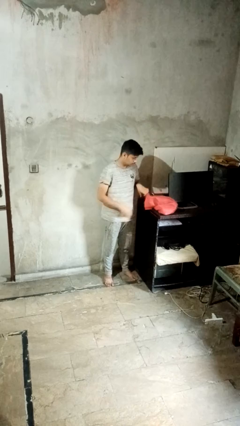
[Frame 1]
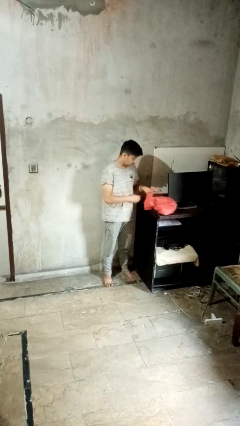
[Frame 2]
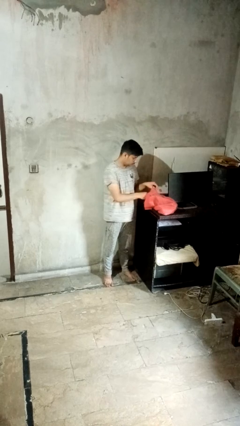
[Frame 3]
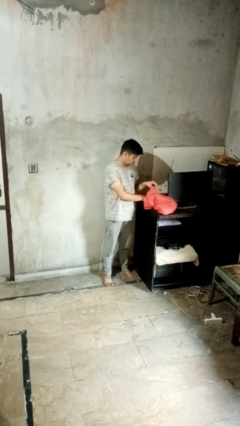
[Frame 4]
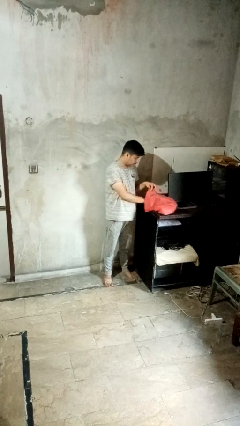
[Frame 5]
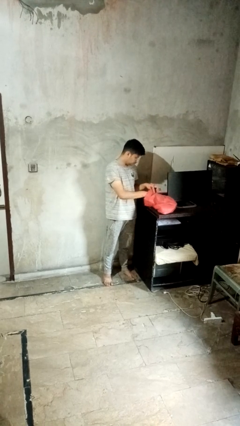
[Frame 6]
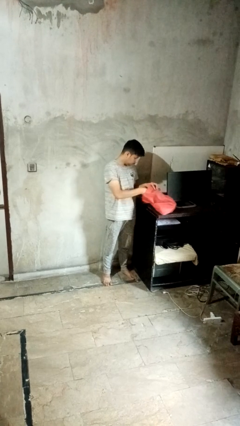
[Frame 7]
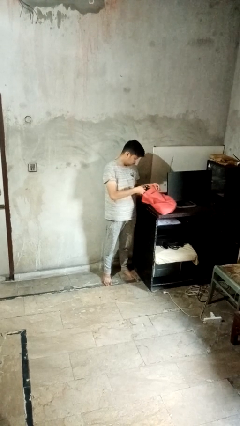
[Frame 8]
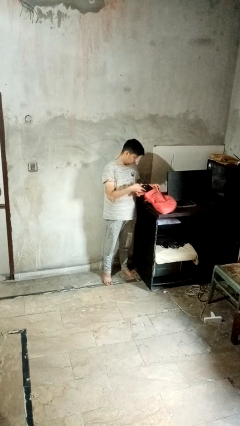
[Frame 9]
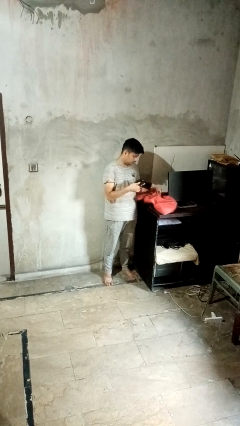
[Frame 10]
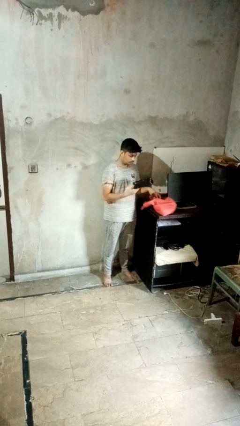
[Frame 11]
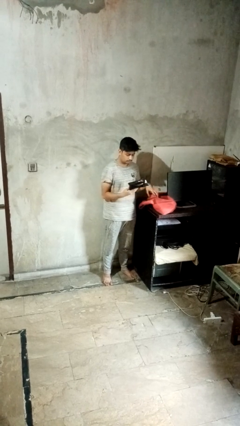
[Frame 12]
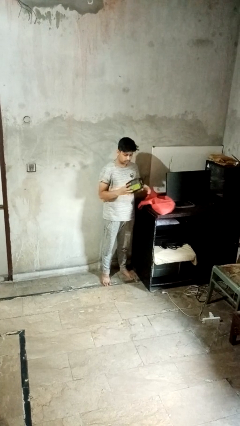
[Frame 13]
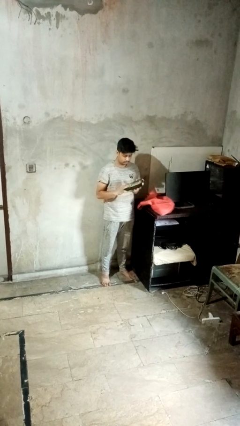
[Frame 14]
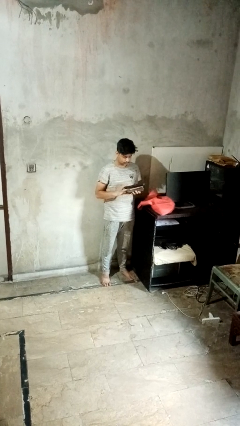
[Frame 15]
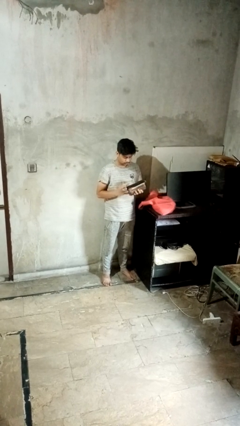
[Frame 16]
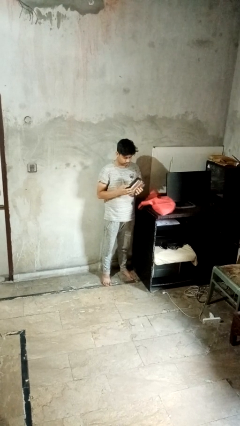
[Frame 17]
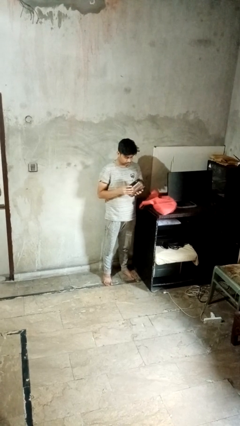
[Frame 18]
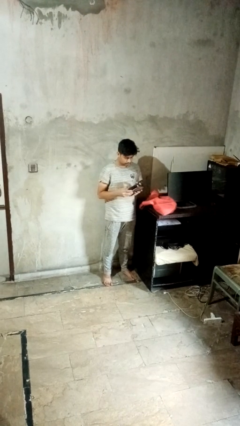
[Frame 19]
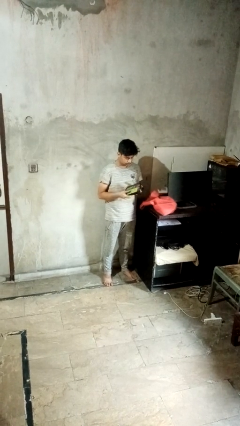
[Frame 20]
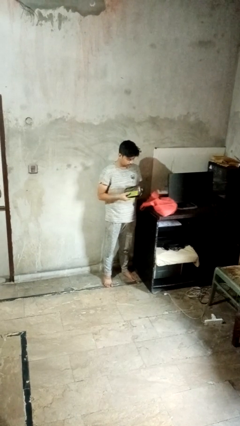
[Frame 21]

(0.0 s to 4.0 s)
person takes object from bag

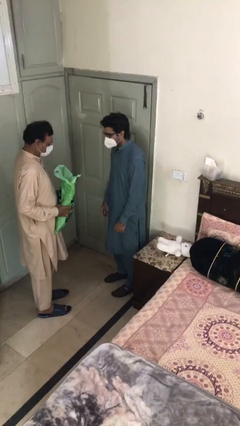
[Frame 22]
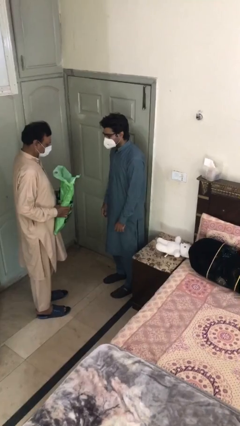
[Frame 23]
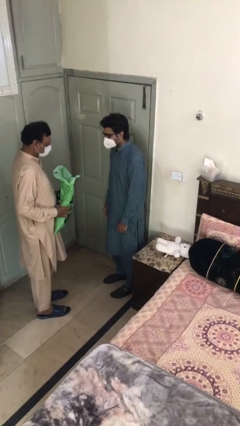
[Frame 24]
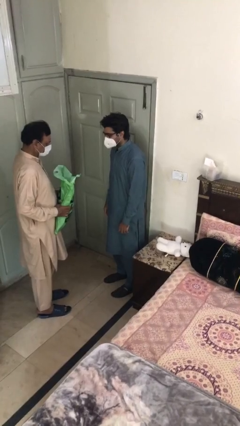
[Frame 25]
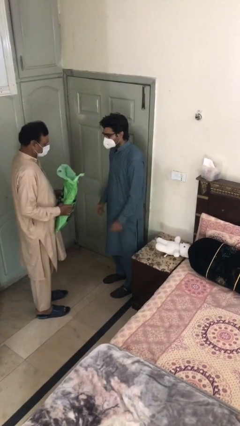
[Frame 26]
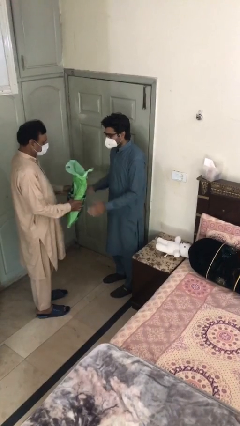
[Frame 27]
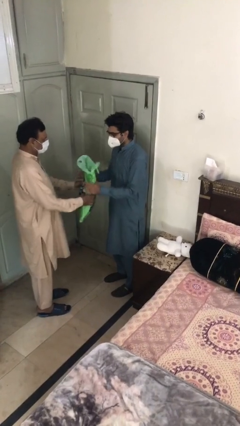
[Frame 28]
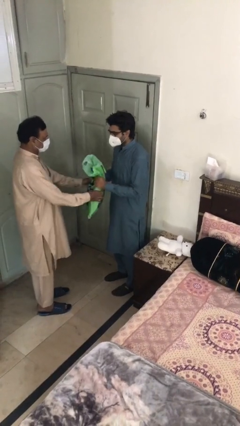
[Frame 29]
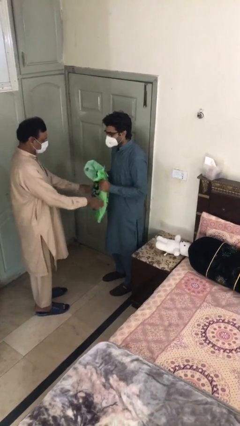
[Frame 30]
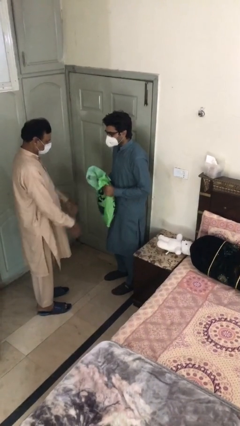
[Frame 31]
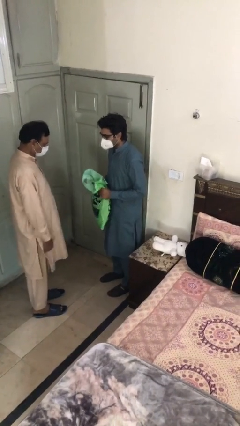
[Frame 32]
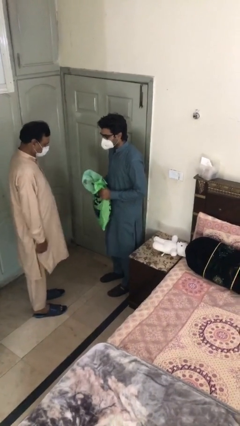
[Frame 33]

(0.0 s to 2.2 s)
person transfers object to person

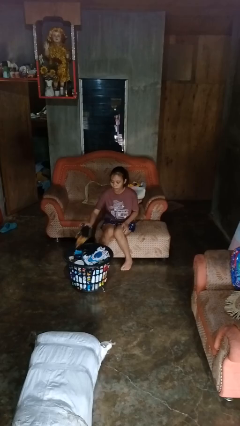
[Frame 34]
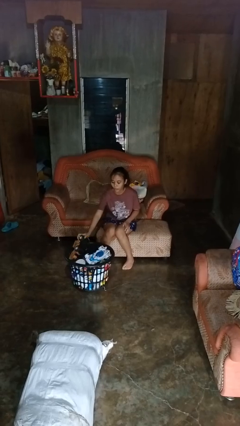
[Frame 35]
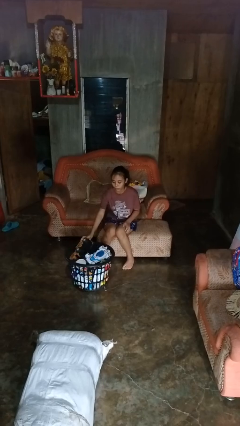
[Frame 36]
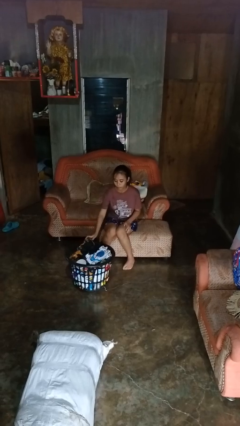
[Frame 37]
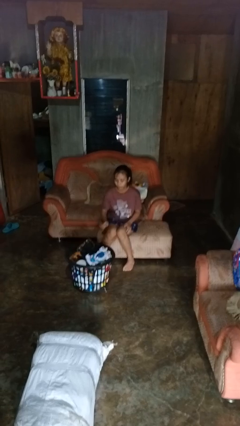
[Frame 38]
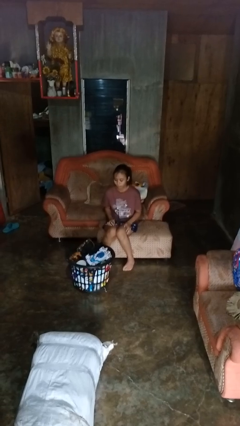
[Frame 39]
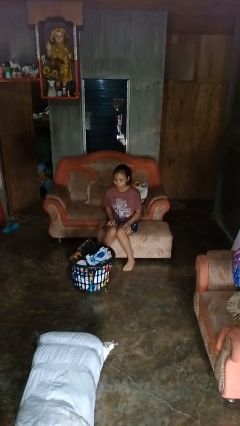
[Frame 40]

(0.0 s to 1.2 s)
person puts object into basket

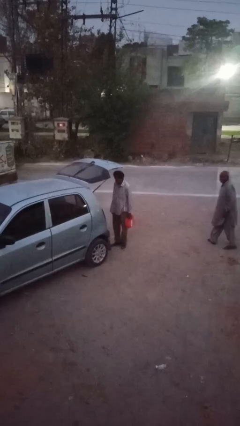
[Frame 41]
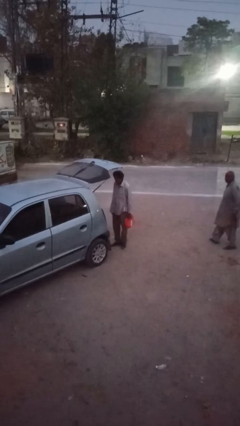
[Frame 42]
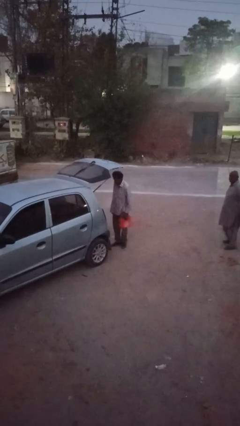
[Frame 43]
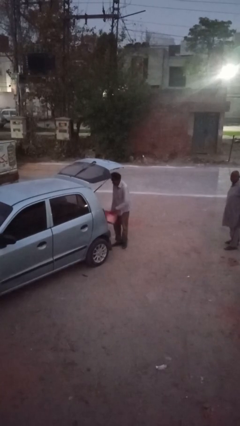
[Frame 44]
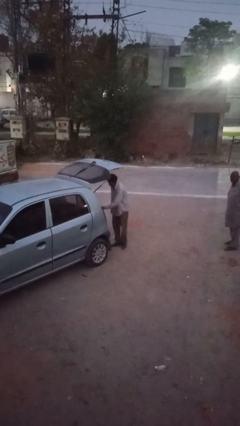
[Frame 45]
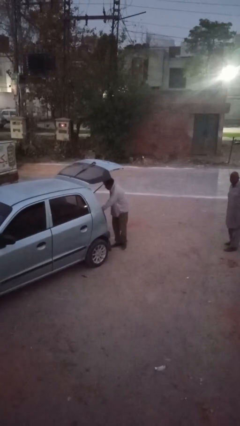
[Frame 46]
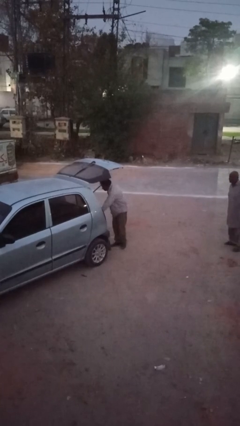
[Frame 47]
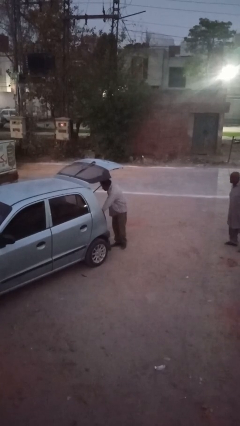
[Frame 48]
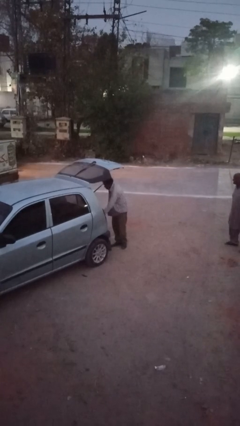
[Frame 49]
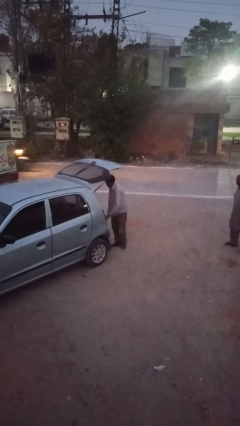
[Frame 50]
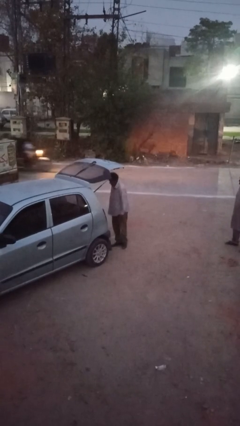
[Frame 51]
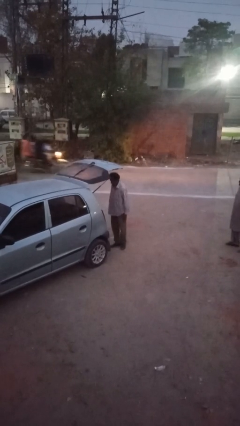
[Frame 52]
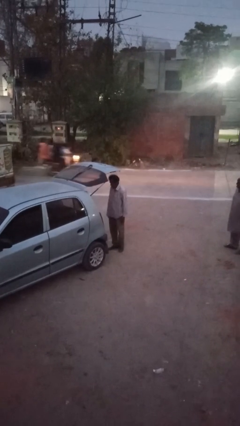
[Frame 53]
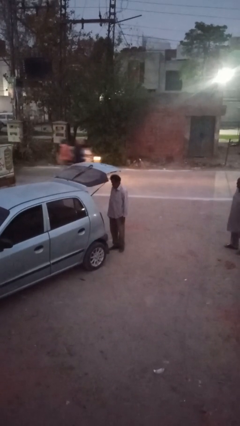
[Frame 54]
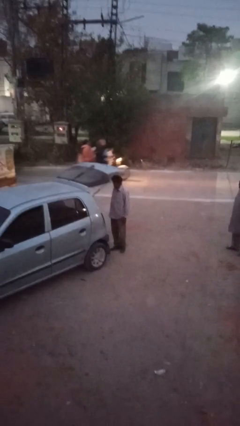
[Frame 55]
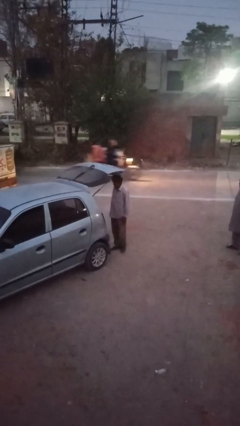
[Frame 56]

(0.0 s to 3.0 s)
person loads car

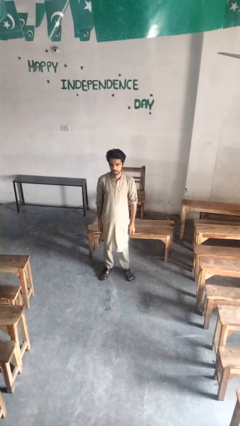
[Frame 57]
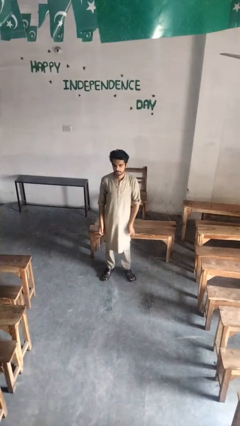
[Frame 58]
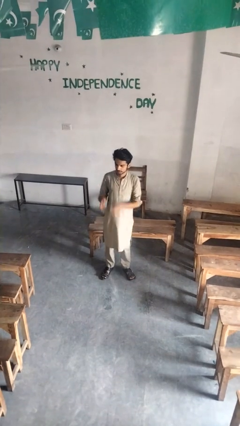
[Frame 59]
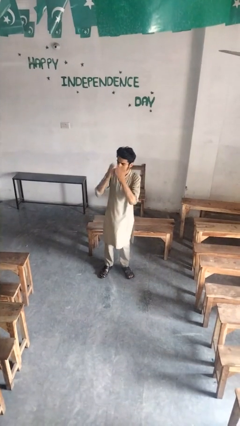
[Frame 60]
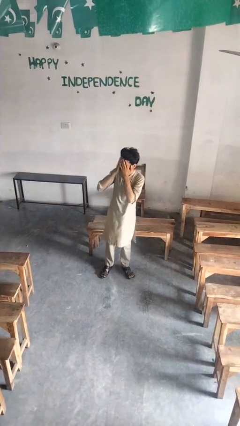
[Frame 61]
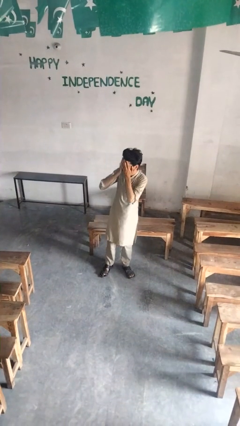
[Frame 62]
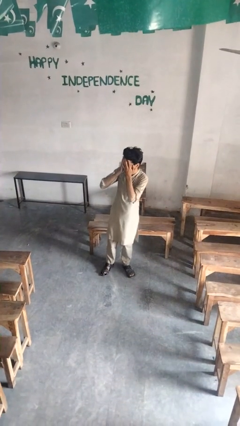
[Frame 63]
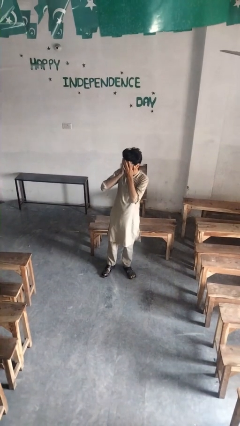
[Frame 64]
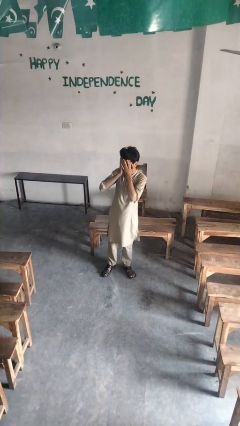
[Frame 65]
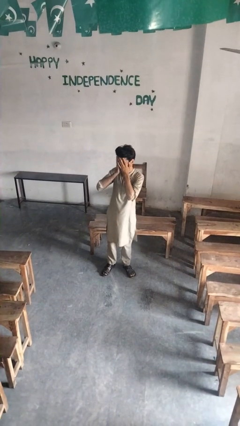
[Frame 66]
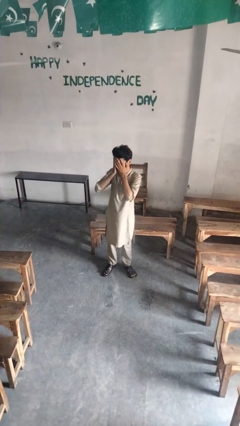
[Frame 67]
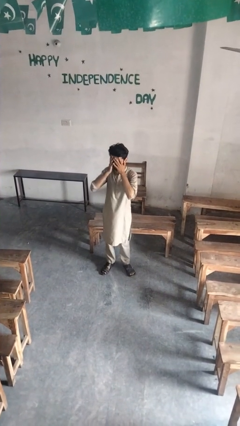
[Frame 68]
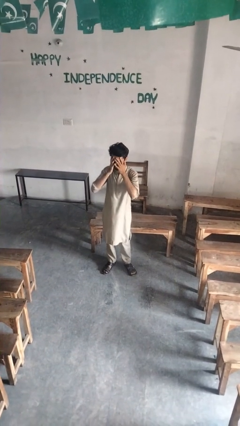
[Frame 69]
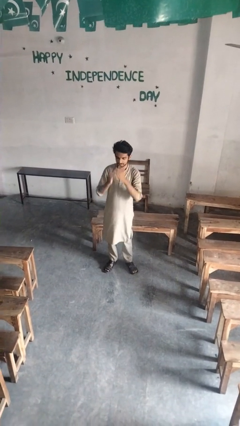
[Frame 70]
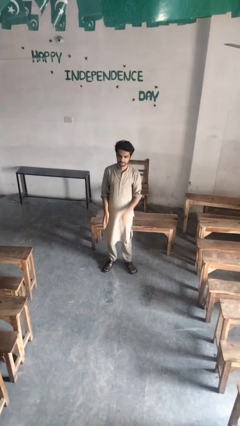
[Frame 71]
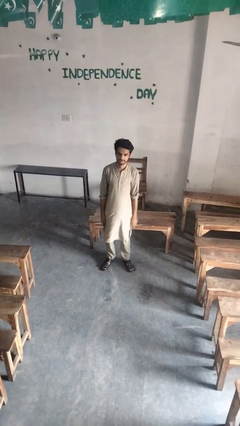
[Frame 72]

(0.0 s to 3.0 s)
person covers face with hands

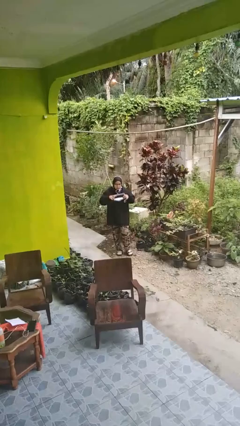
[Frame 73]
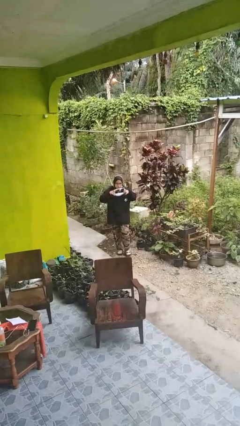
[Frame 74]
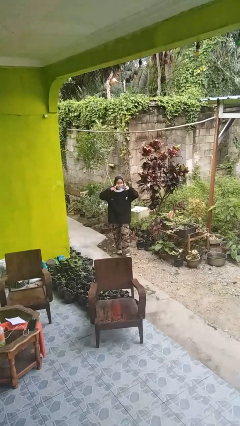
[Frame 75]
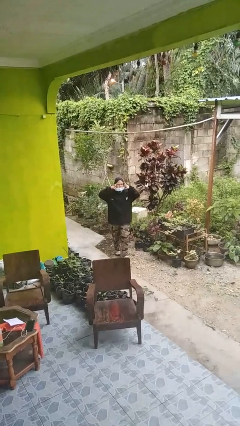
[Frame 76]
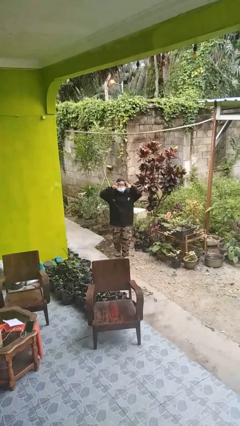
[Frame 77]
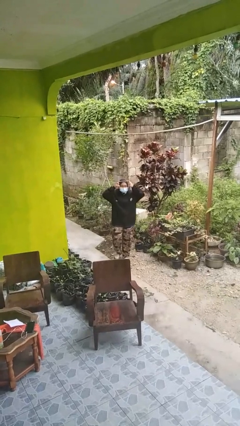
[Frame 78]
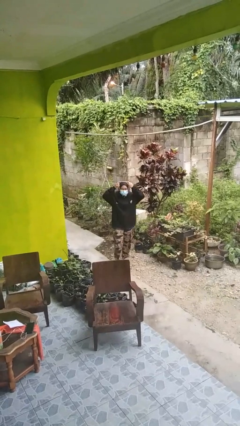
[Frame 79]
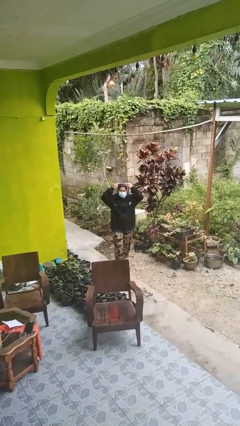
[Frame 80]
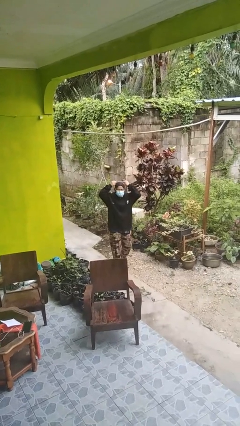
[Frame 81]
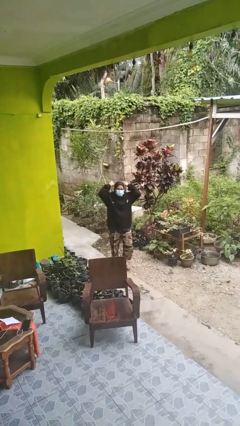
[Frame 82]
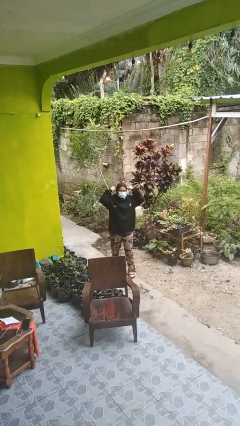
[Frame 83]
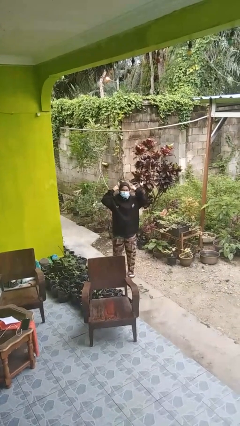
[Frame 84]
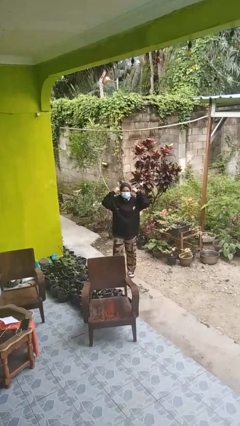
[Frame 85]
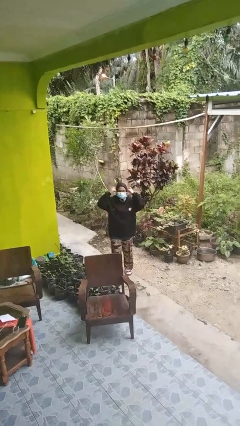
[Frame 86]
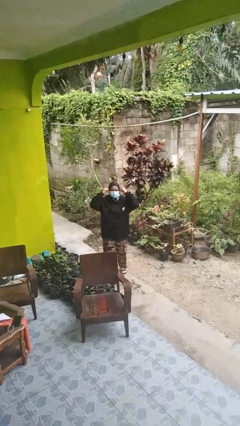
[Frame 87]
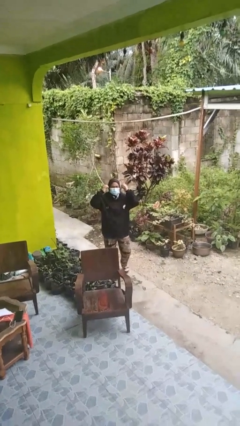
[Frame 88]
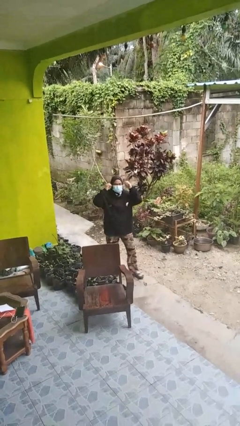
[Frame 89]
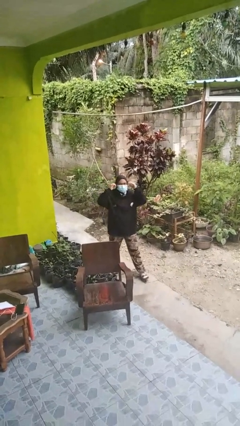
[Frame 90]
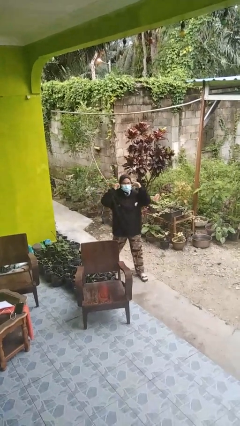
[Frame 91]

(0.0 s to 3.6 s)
person puts on facemask

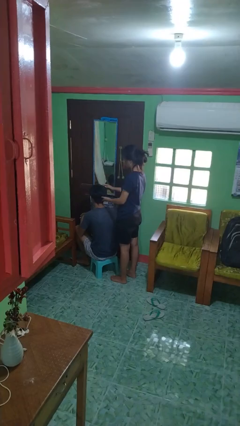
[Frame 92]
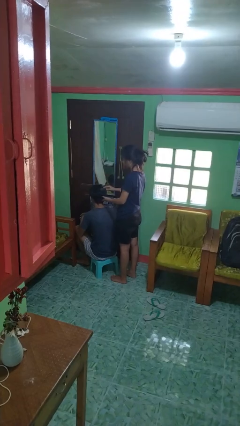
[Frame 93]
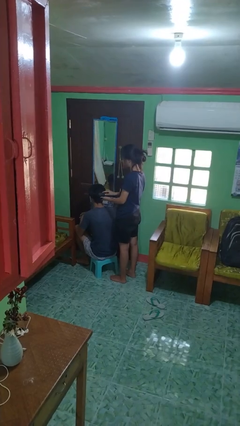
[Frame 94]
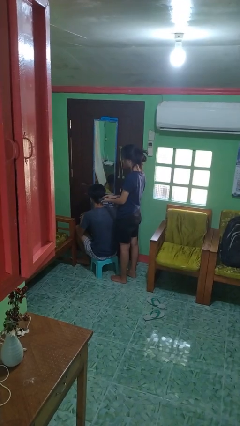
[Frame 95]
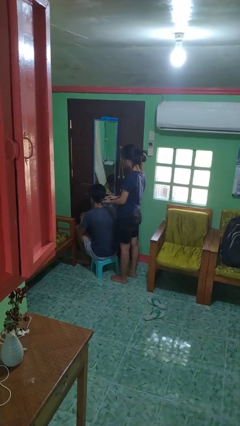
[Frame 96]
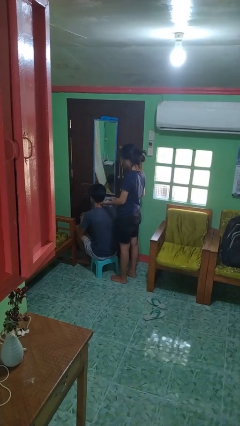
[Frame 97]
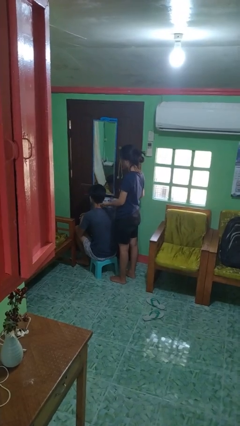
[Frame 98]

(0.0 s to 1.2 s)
person brushes hair of person
